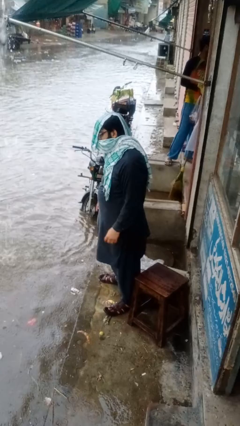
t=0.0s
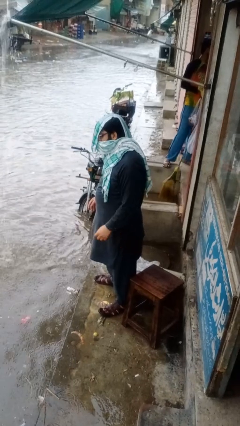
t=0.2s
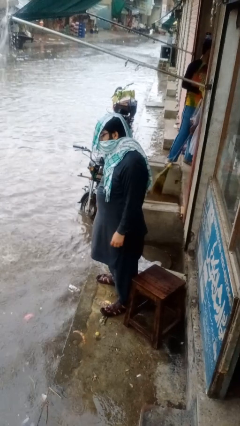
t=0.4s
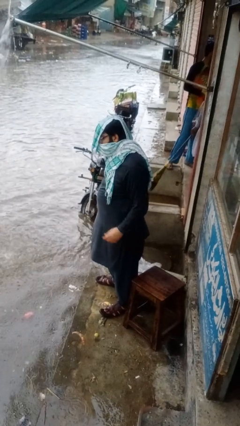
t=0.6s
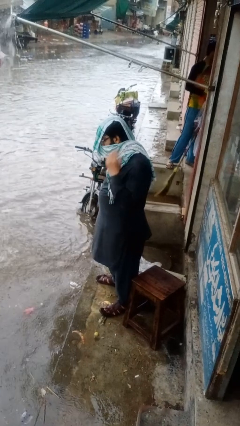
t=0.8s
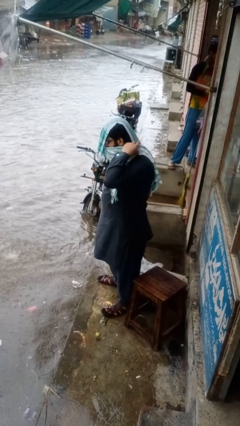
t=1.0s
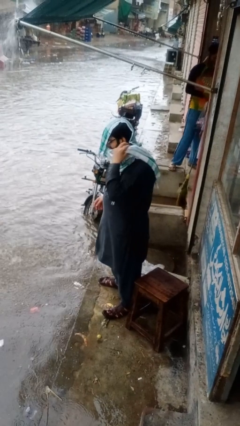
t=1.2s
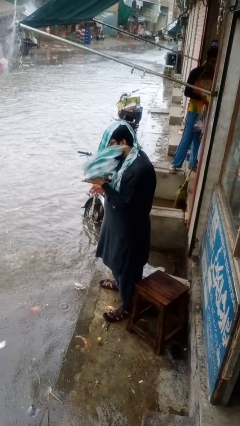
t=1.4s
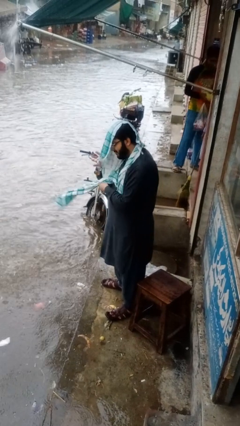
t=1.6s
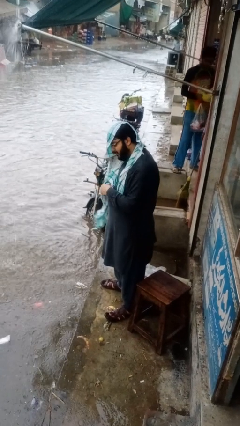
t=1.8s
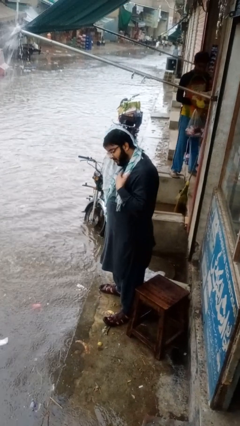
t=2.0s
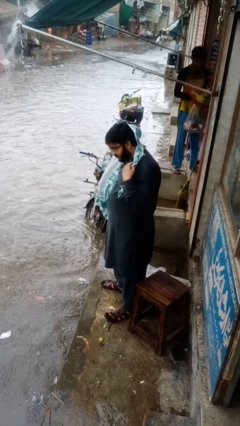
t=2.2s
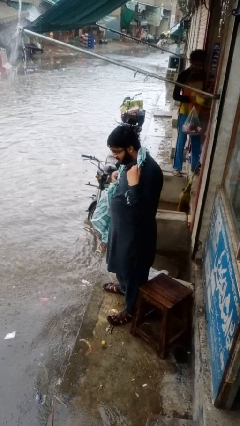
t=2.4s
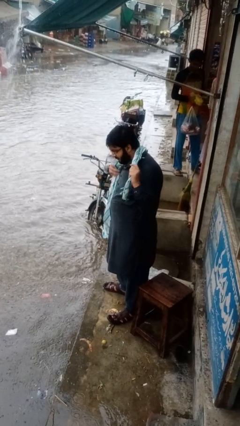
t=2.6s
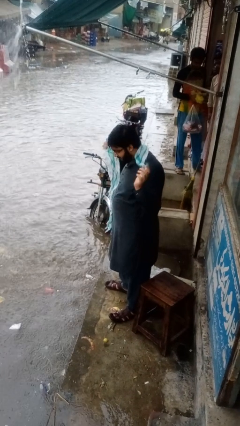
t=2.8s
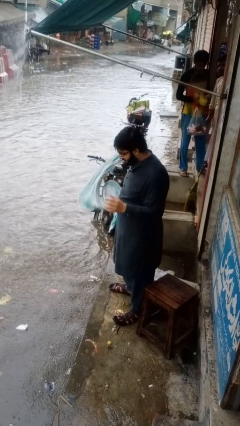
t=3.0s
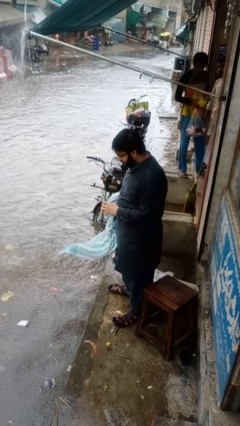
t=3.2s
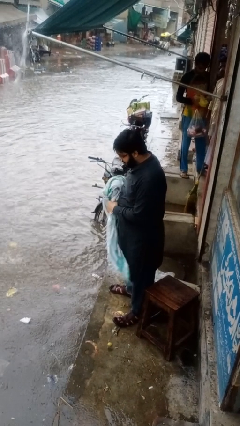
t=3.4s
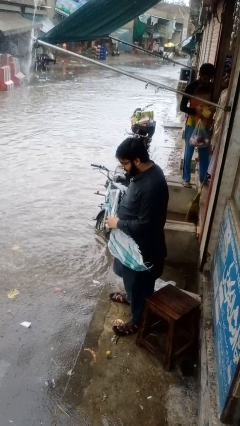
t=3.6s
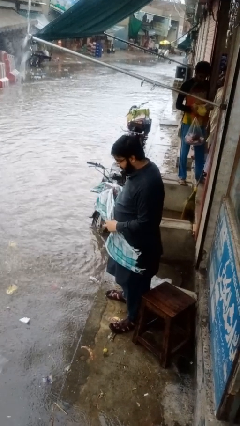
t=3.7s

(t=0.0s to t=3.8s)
person takes off scarf

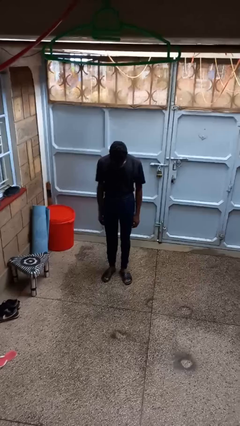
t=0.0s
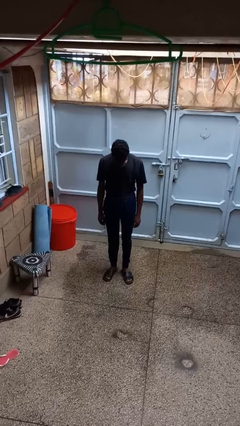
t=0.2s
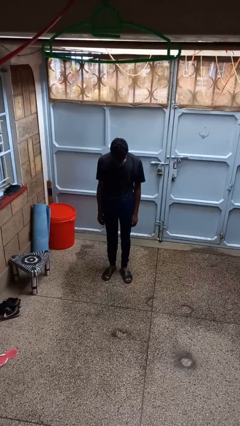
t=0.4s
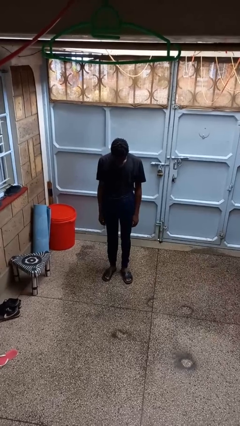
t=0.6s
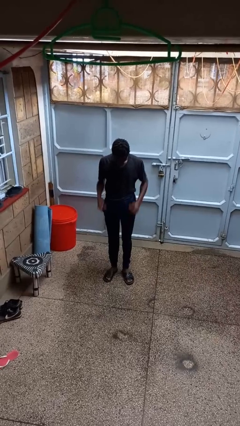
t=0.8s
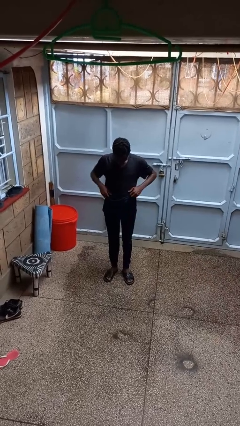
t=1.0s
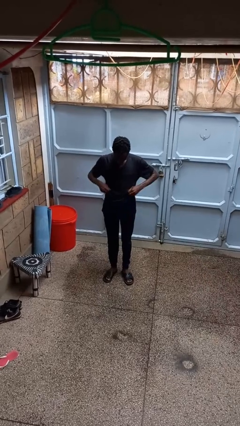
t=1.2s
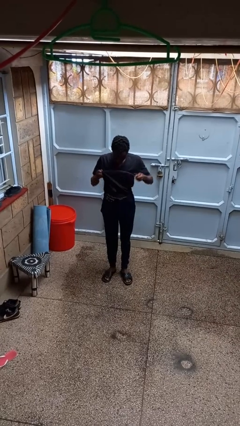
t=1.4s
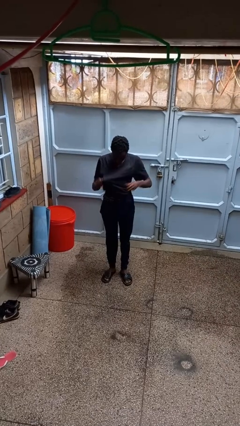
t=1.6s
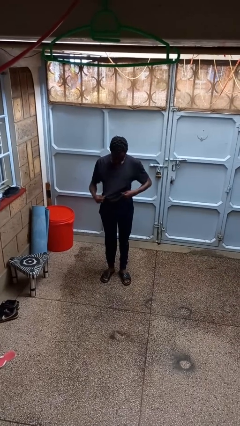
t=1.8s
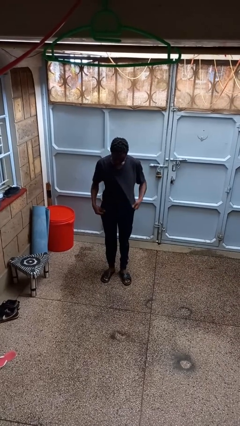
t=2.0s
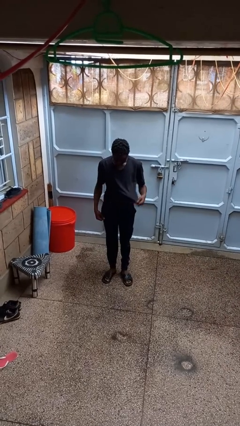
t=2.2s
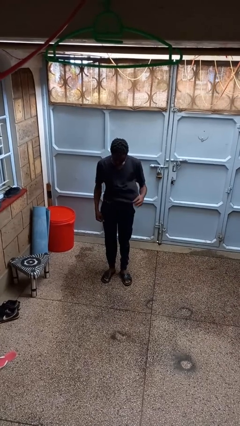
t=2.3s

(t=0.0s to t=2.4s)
person untucks shirt

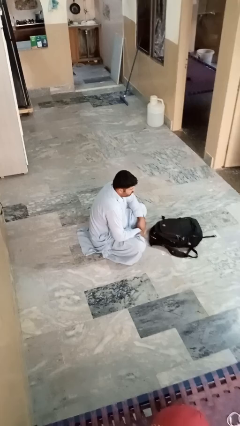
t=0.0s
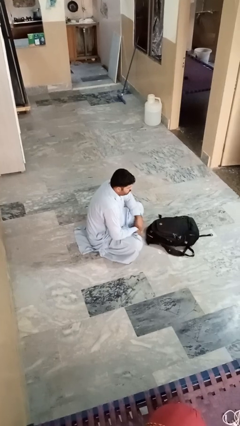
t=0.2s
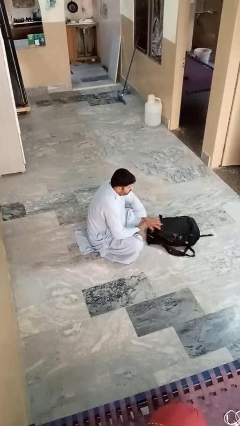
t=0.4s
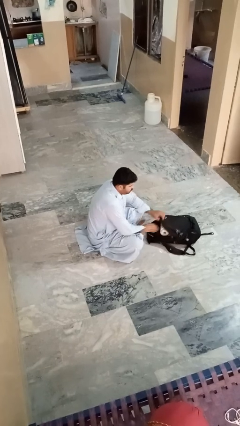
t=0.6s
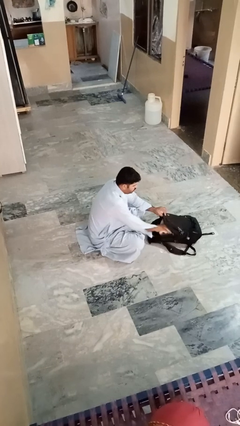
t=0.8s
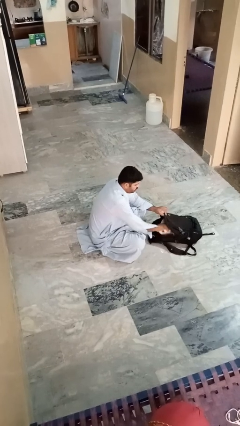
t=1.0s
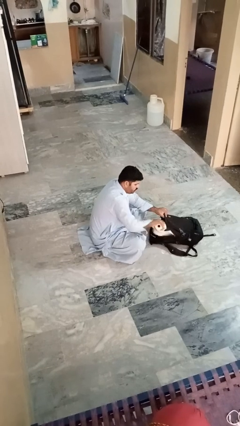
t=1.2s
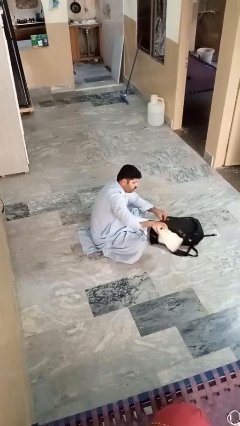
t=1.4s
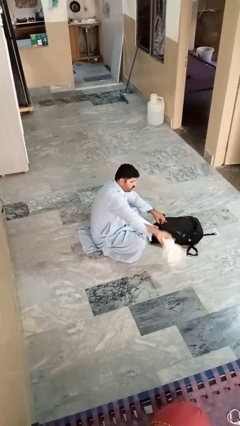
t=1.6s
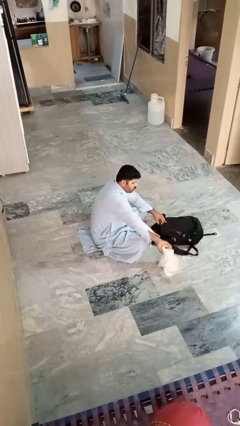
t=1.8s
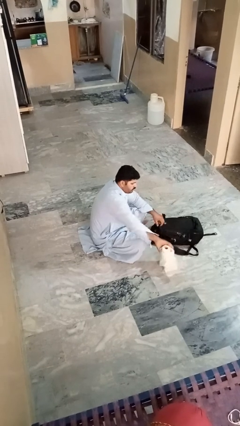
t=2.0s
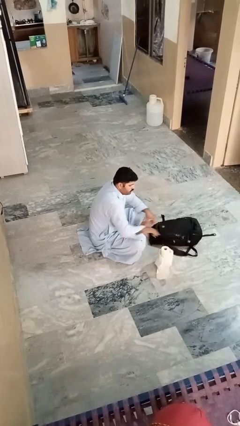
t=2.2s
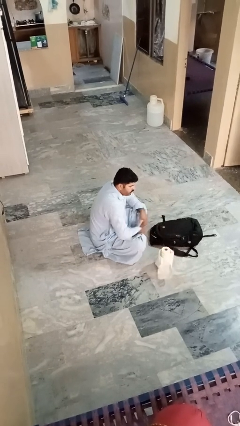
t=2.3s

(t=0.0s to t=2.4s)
person takes object from bag

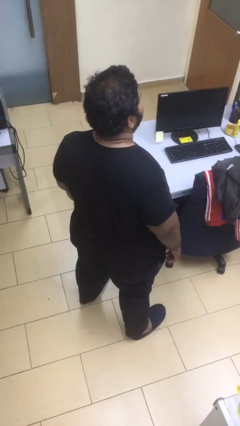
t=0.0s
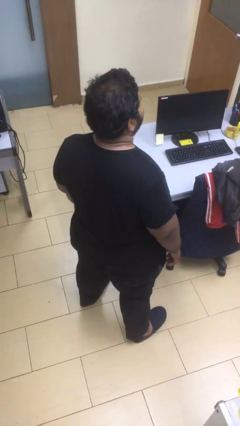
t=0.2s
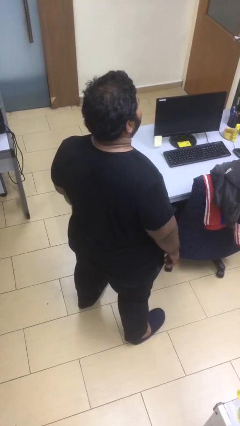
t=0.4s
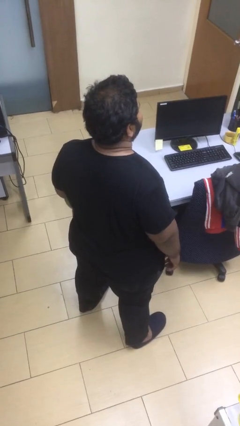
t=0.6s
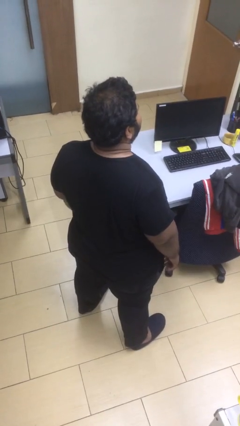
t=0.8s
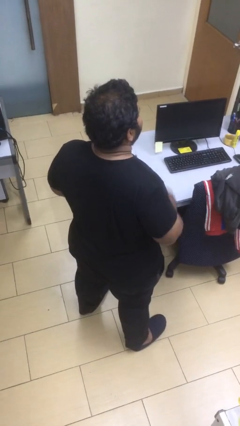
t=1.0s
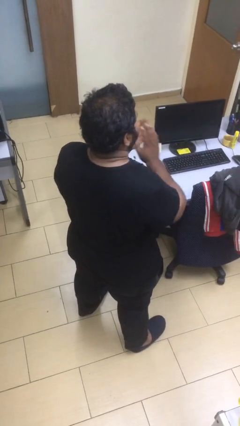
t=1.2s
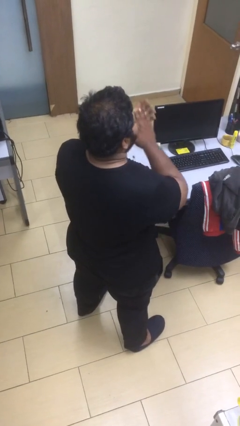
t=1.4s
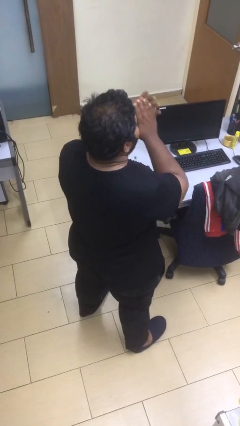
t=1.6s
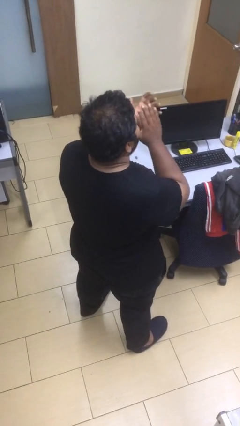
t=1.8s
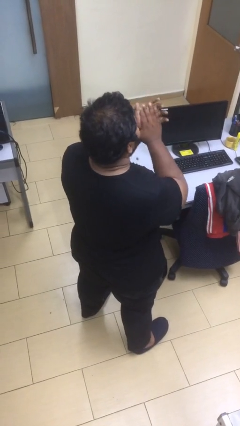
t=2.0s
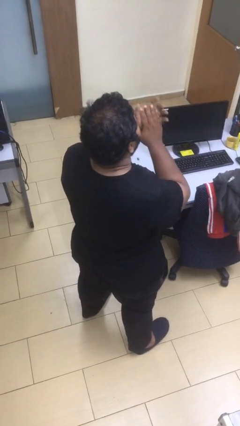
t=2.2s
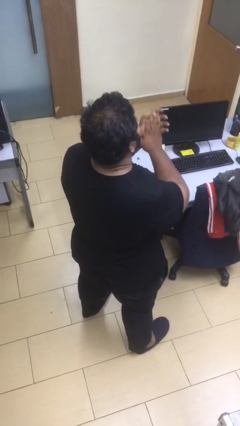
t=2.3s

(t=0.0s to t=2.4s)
person claps hands

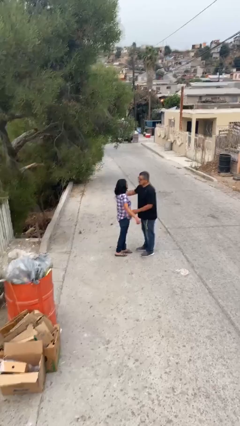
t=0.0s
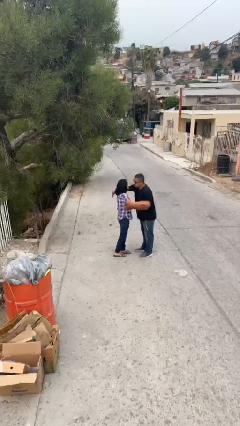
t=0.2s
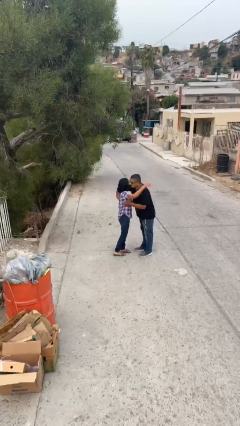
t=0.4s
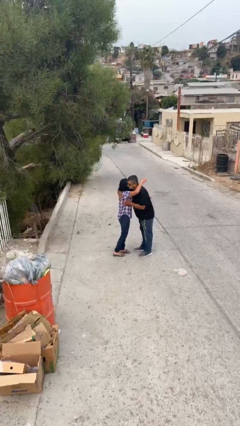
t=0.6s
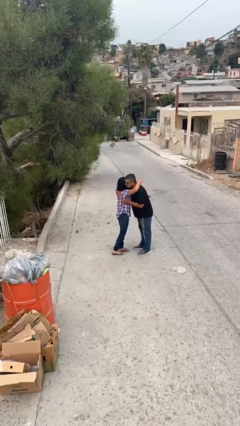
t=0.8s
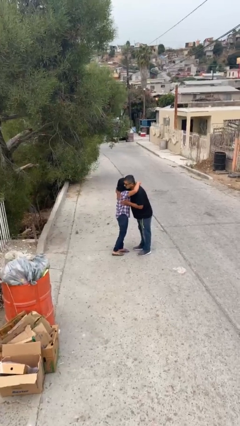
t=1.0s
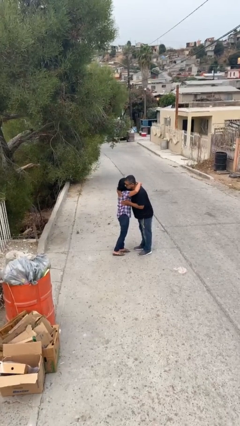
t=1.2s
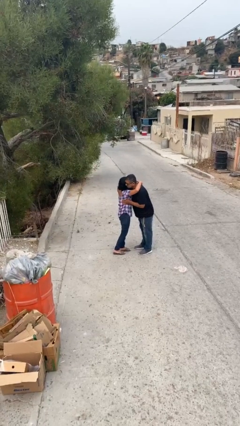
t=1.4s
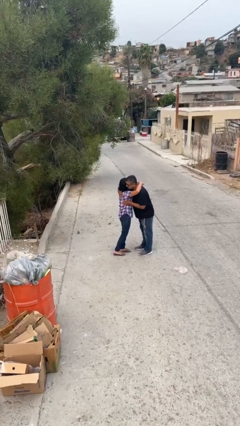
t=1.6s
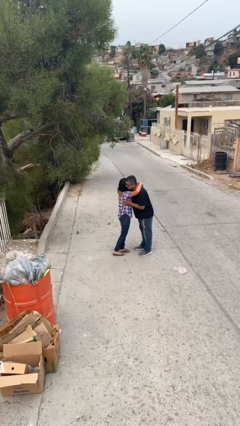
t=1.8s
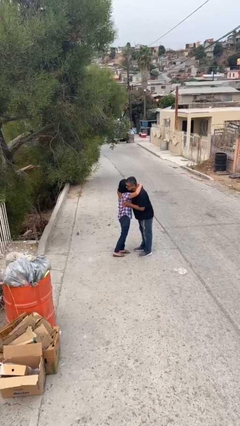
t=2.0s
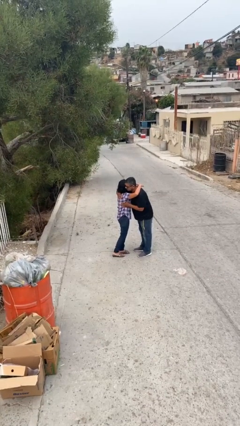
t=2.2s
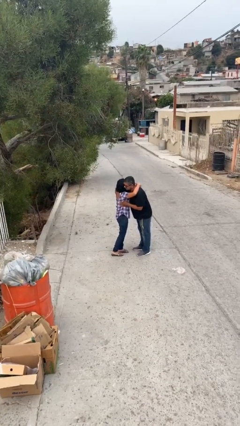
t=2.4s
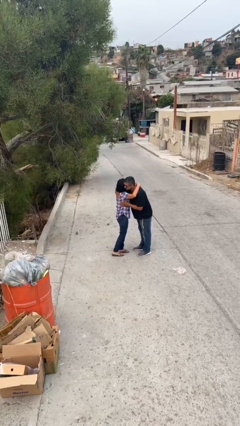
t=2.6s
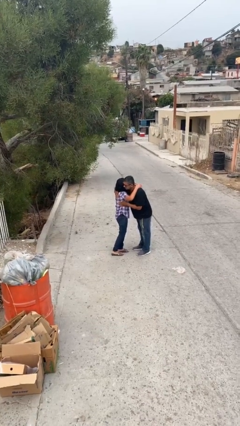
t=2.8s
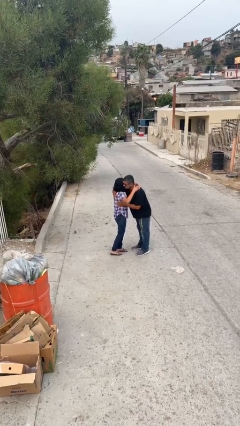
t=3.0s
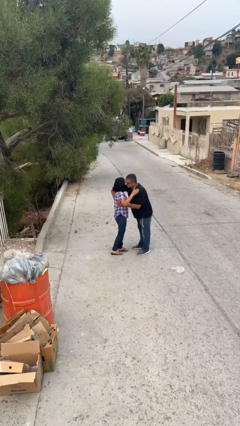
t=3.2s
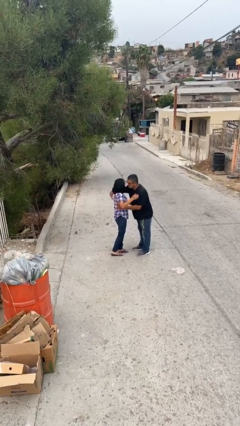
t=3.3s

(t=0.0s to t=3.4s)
person embraces person

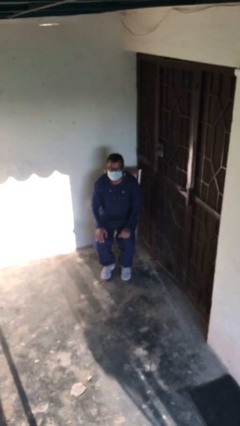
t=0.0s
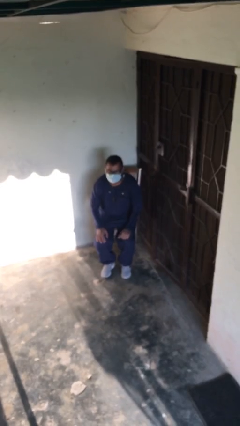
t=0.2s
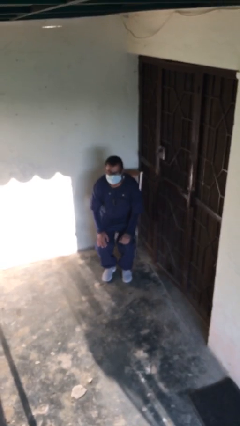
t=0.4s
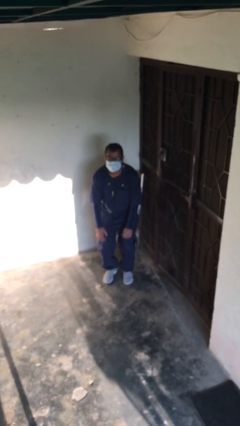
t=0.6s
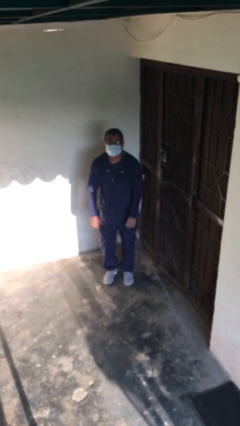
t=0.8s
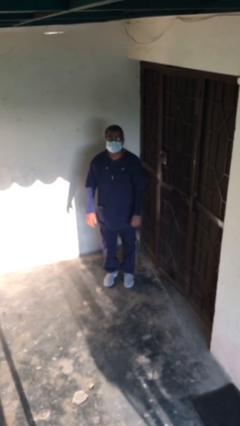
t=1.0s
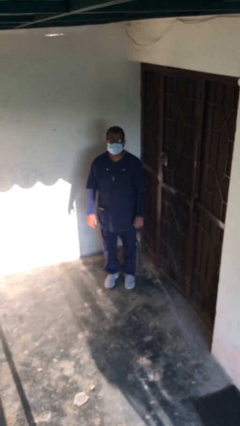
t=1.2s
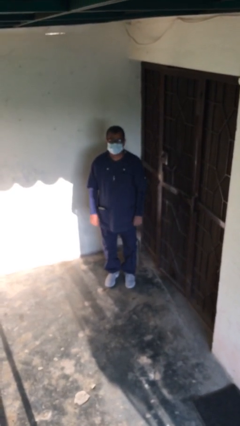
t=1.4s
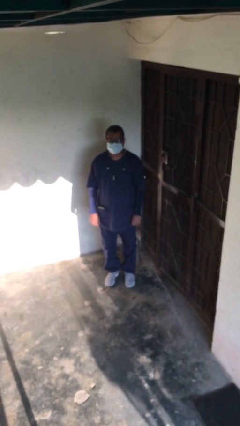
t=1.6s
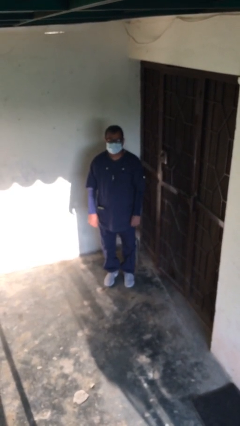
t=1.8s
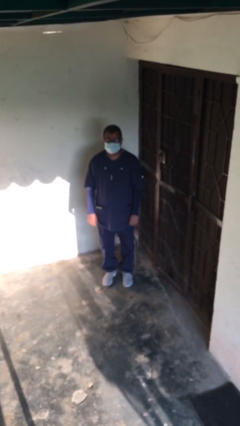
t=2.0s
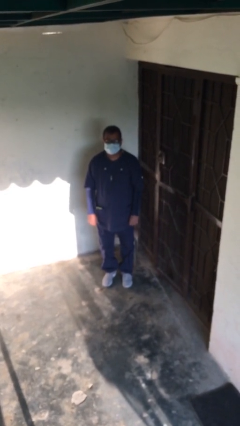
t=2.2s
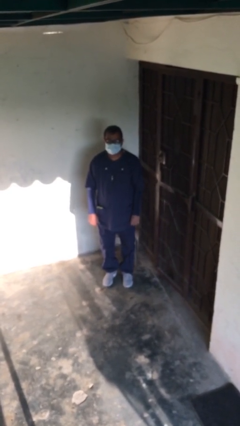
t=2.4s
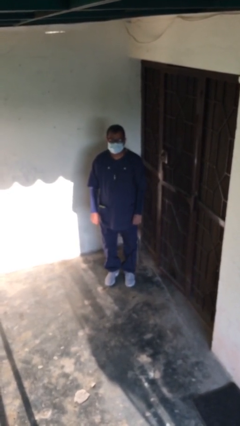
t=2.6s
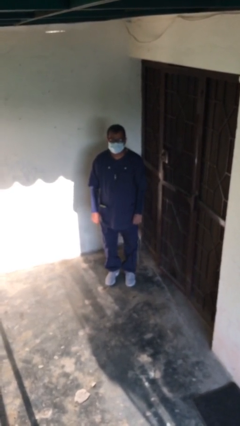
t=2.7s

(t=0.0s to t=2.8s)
person stands up
